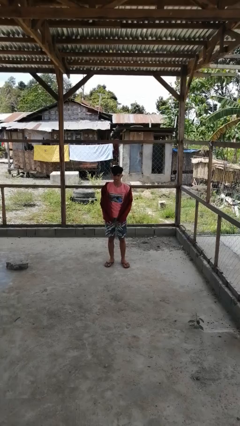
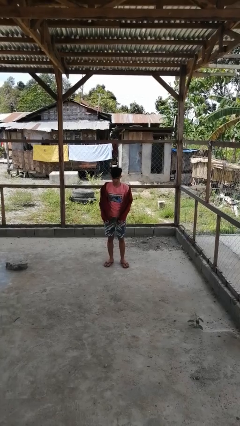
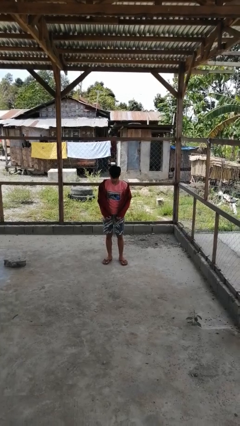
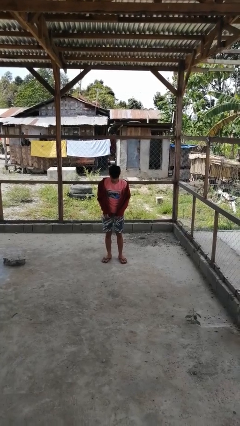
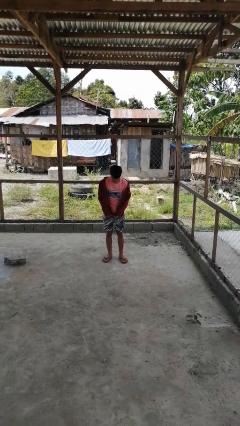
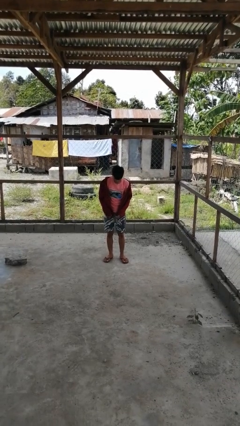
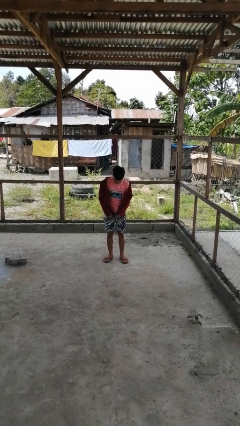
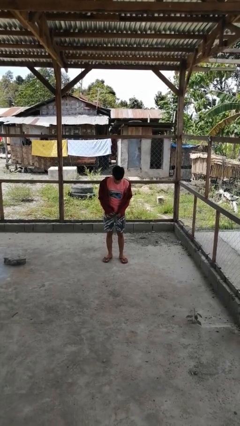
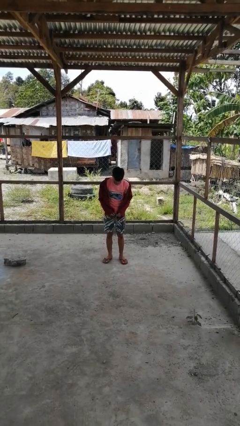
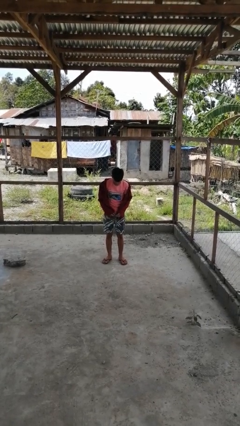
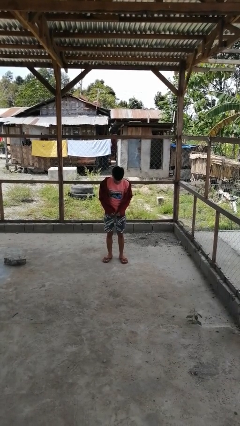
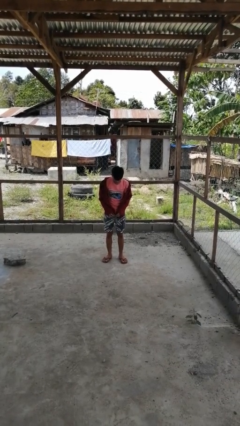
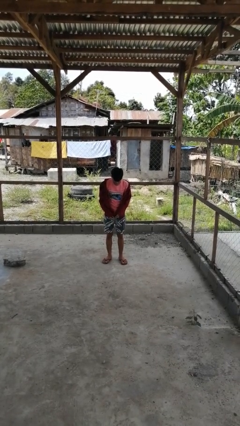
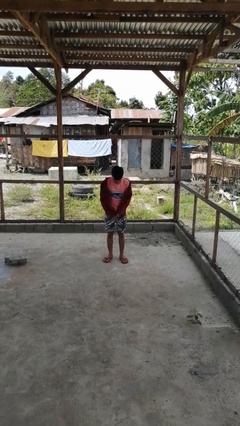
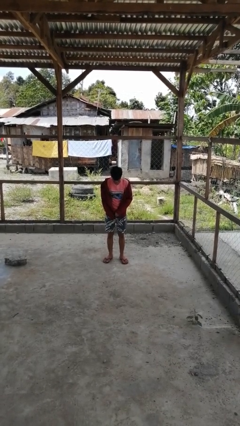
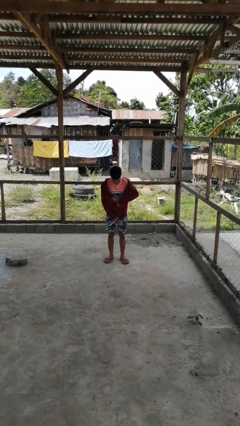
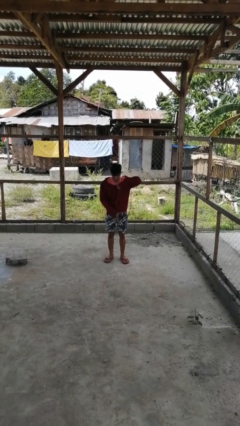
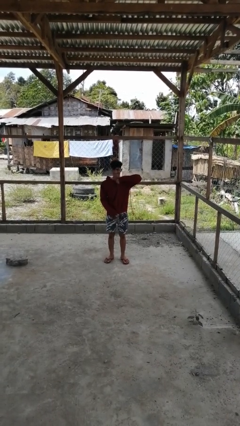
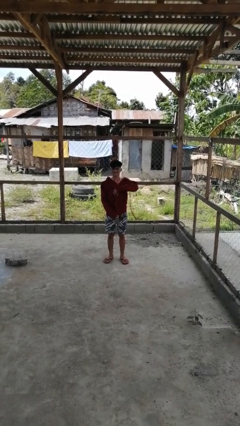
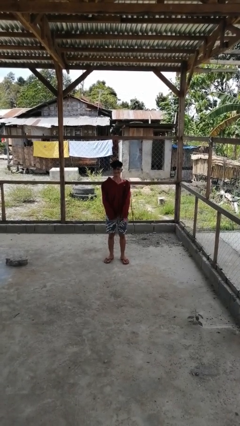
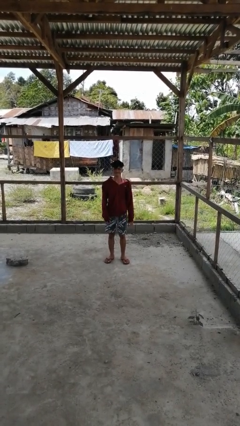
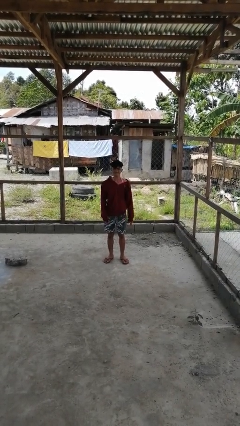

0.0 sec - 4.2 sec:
person zips up jacket

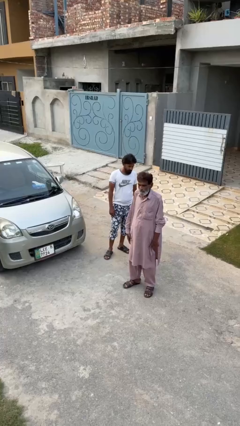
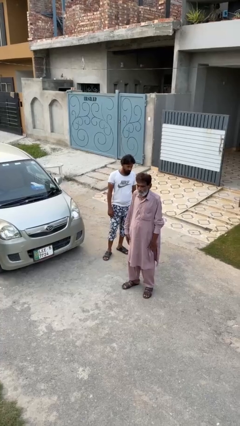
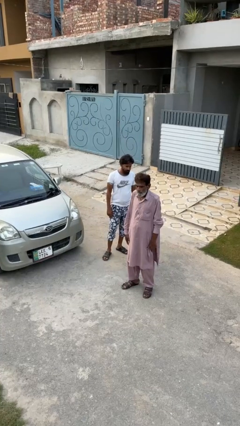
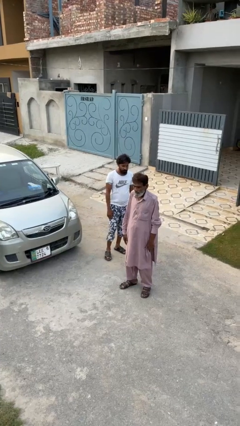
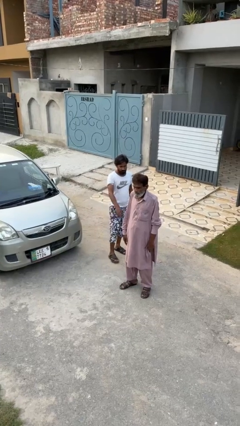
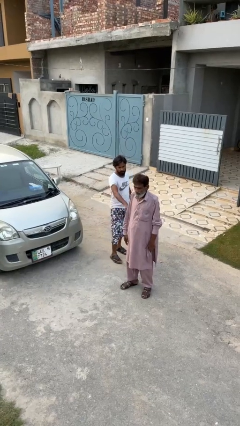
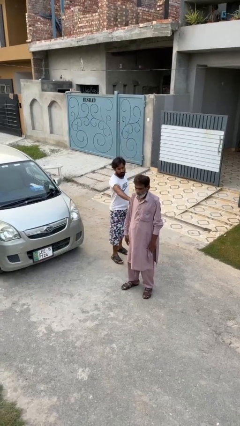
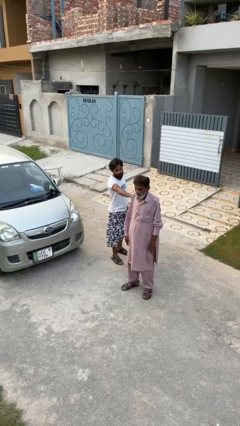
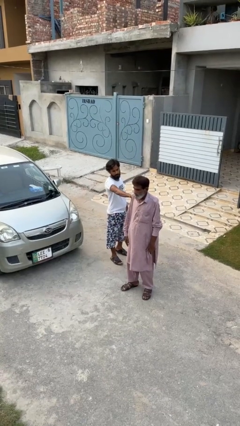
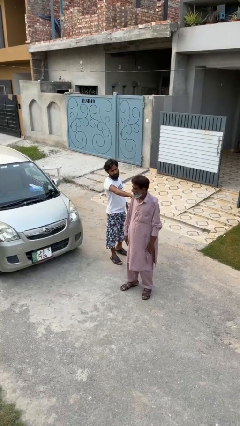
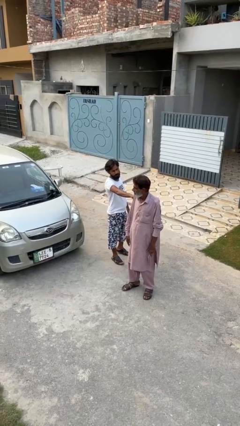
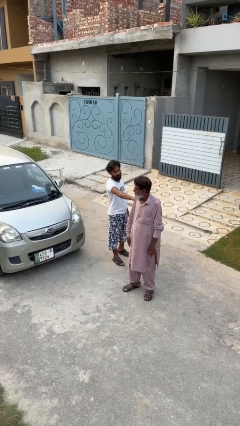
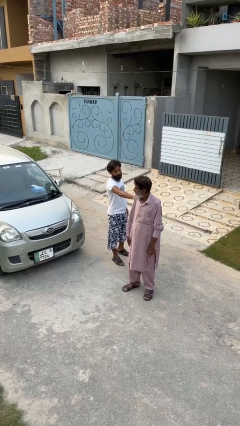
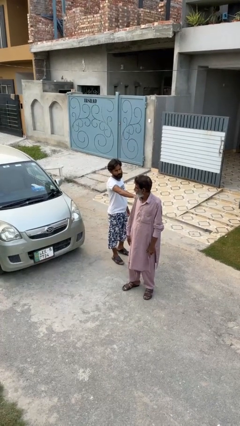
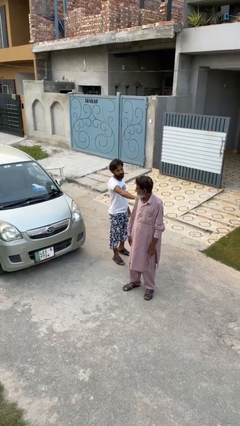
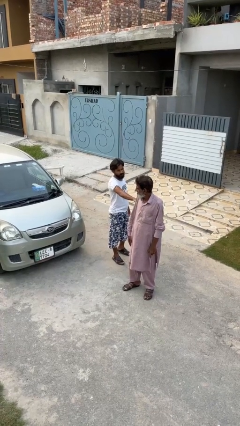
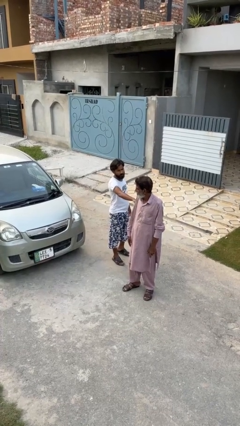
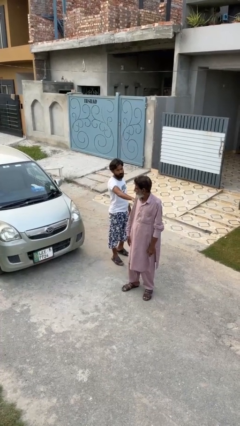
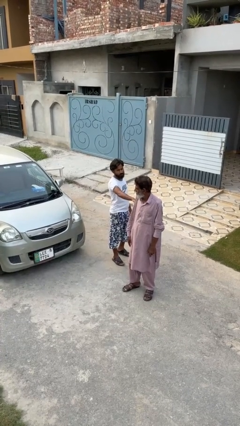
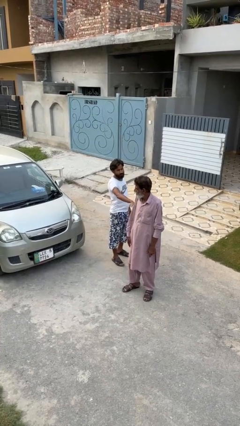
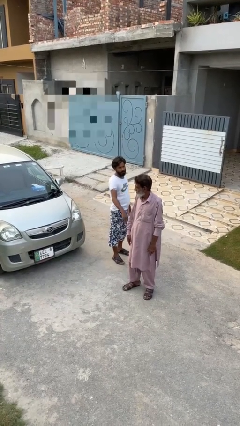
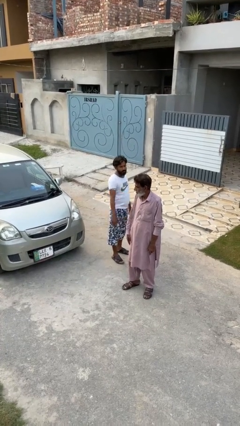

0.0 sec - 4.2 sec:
person touches back of person

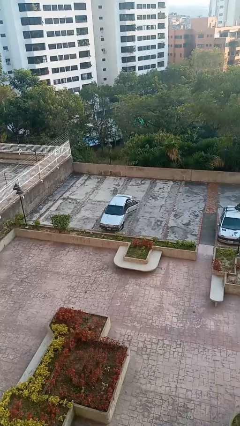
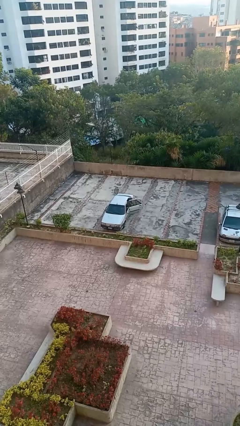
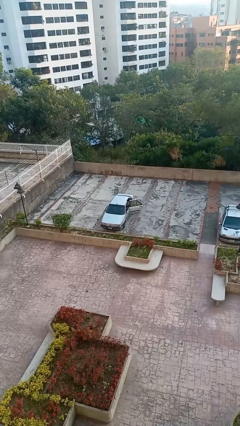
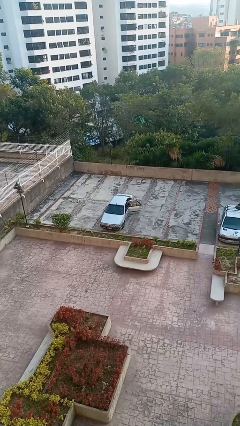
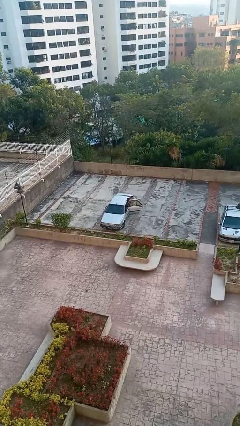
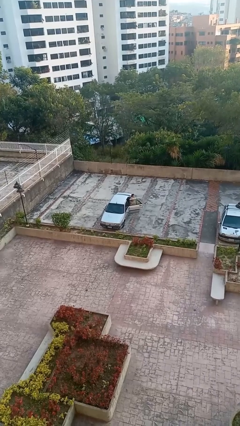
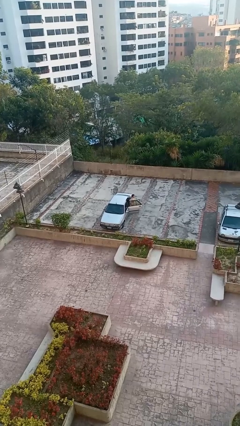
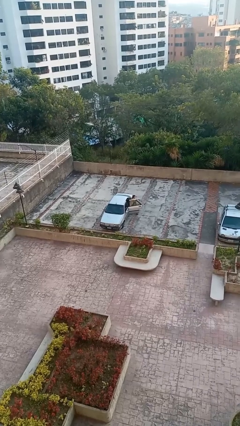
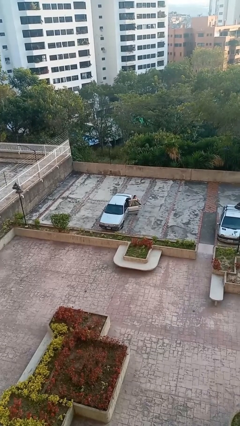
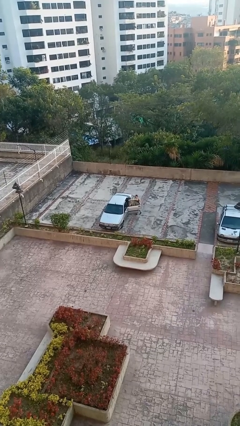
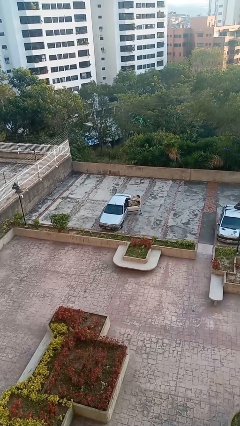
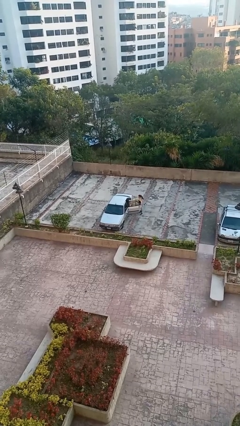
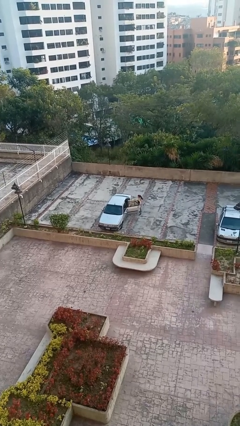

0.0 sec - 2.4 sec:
car drops off person

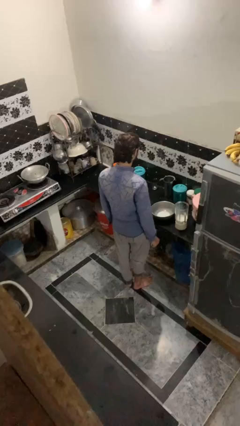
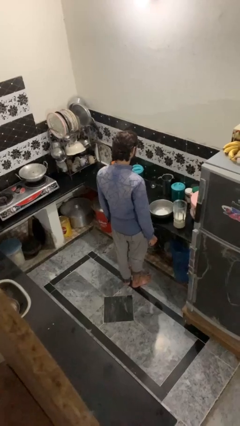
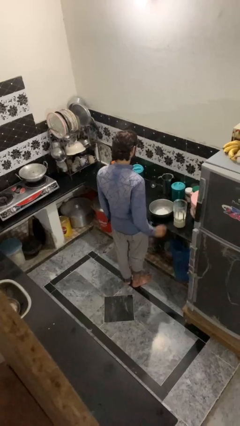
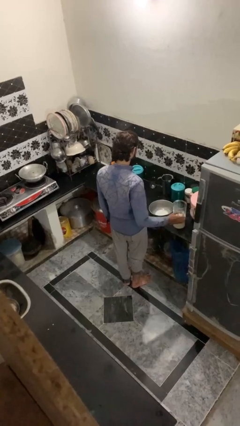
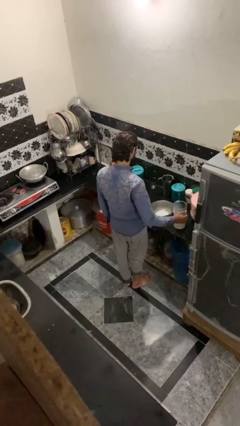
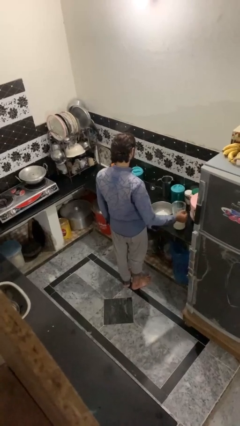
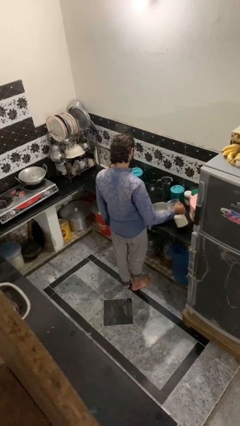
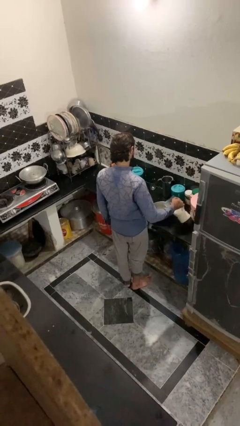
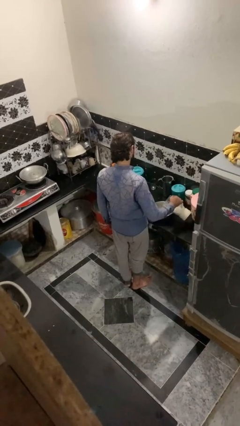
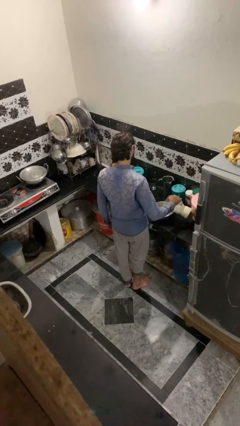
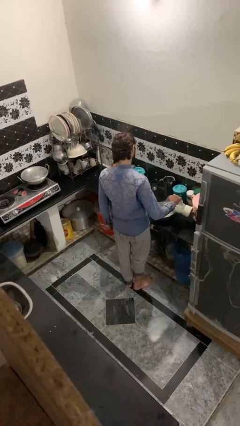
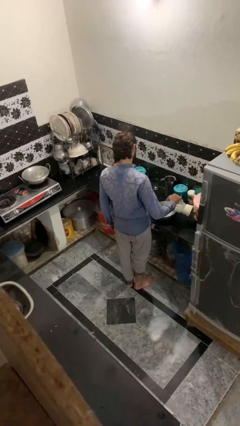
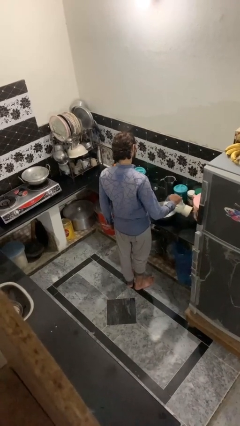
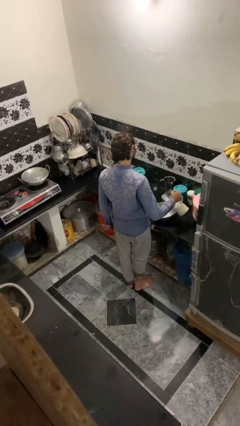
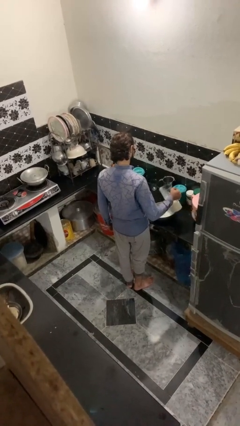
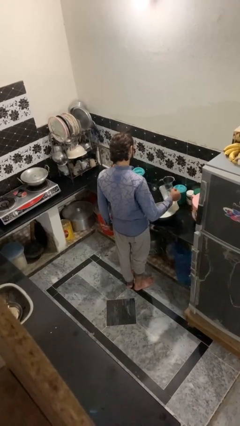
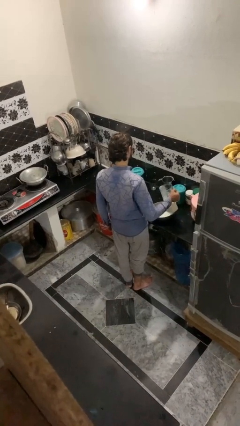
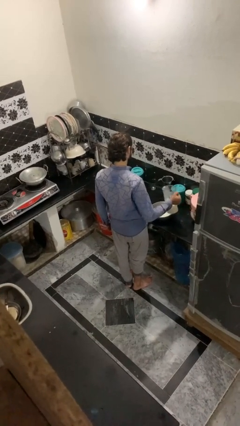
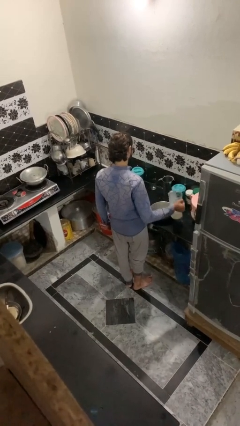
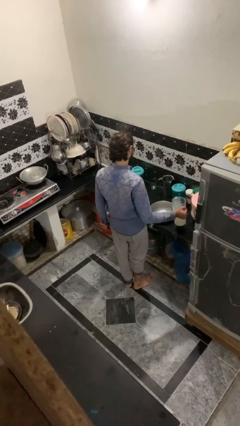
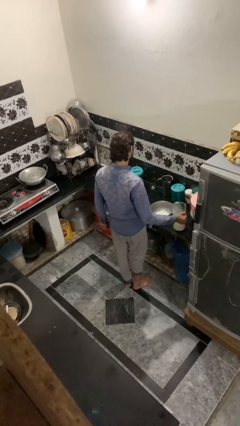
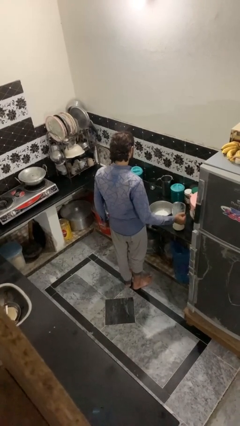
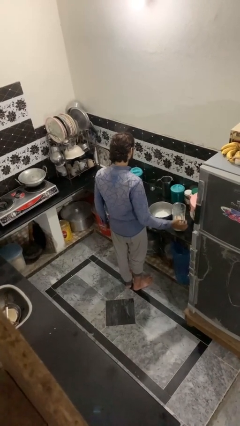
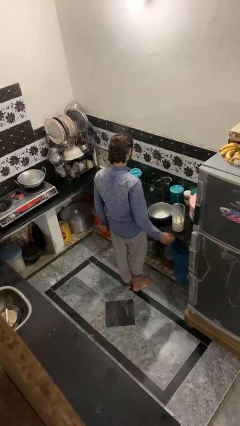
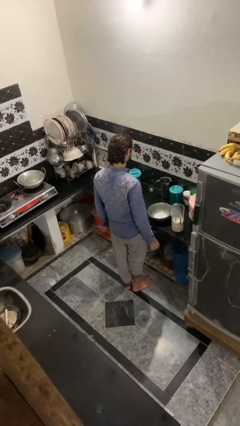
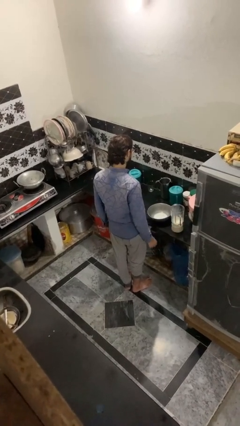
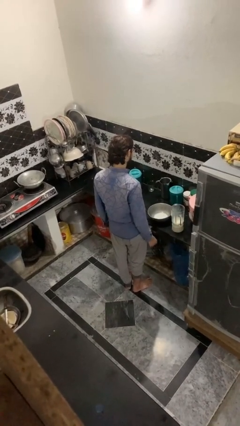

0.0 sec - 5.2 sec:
person pours into bowl

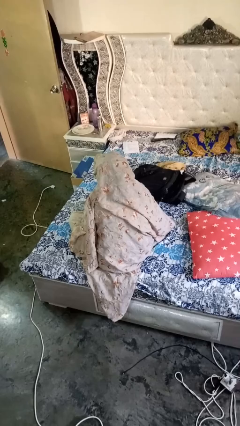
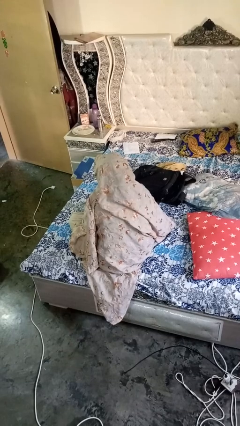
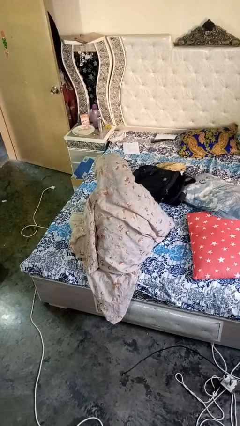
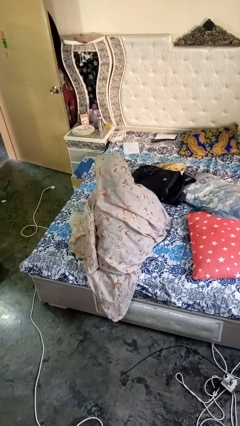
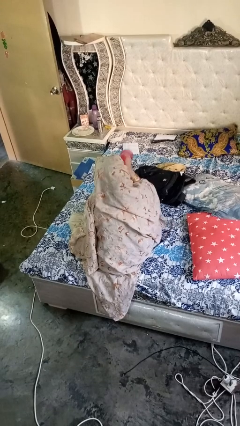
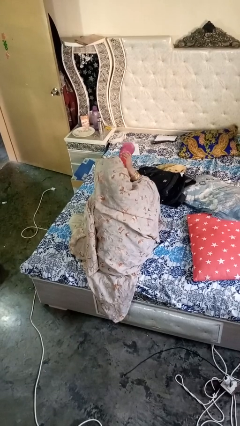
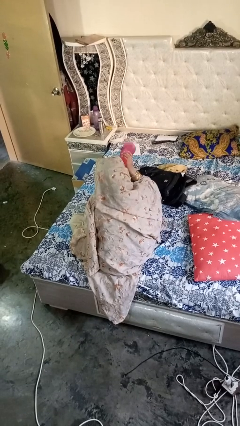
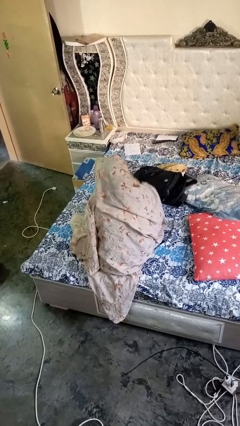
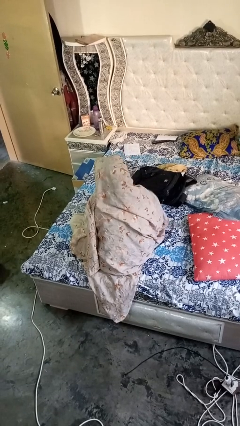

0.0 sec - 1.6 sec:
person drinks from bottle
